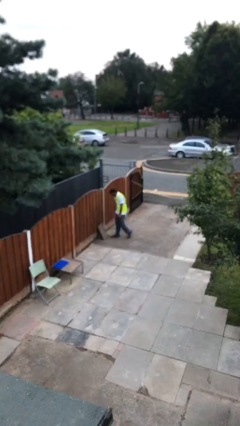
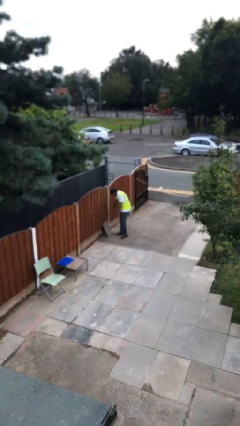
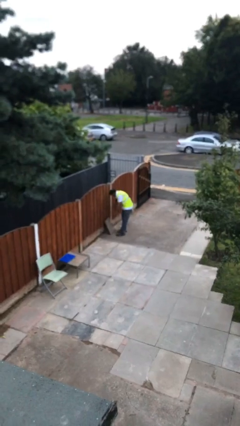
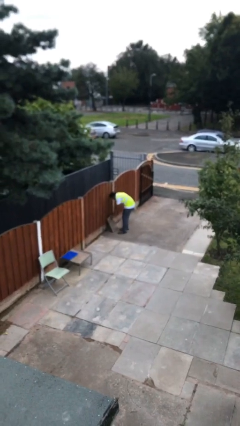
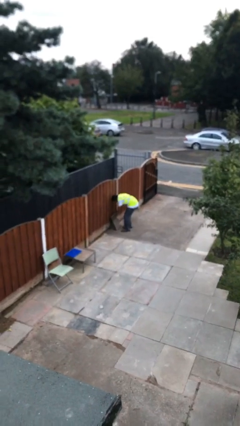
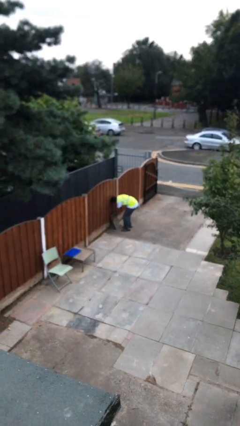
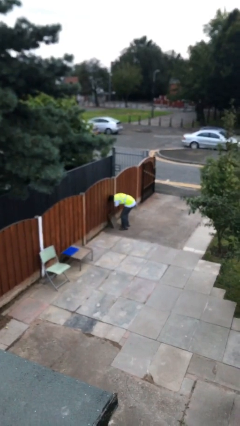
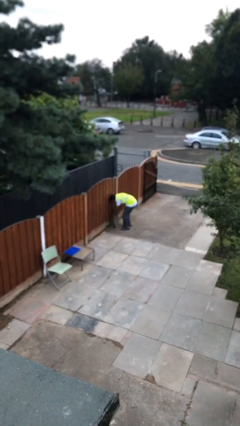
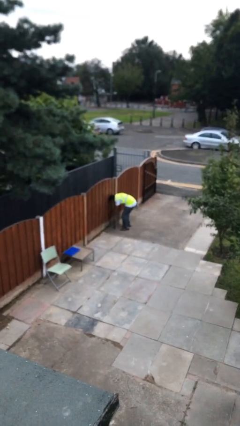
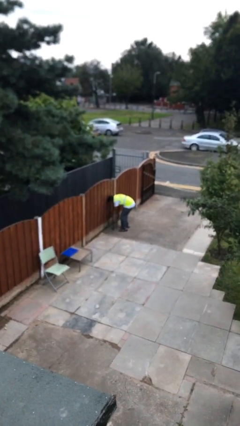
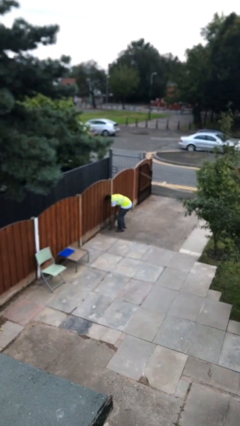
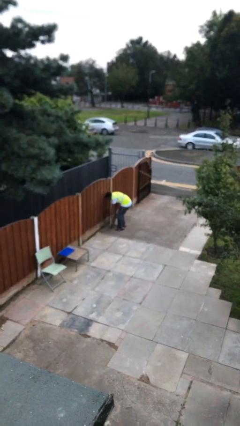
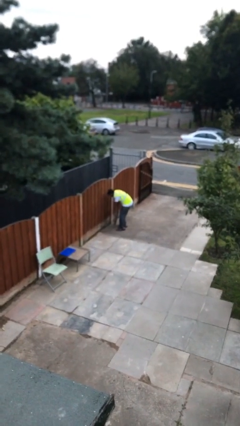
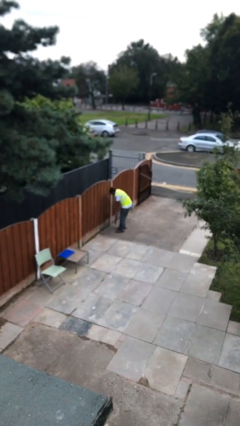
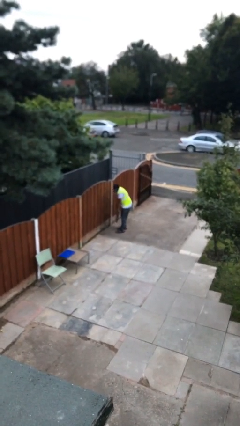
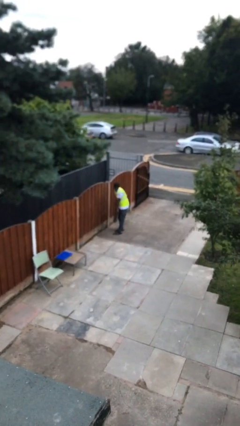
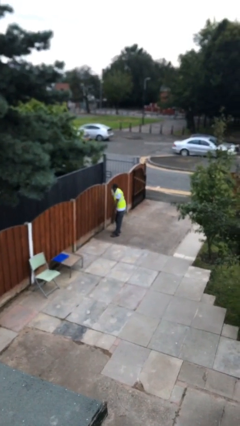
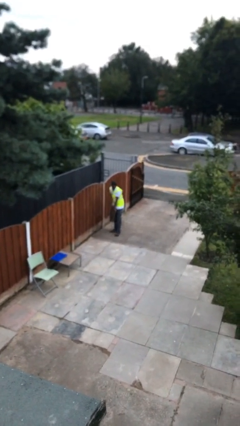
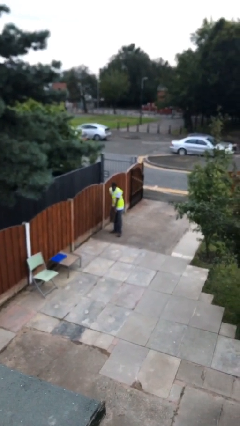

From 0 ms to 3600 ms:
person picks up object from floor

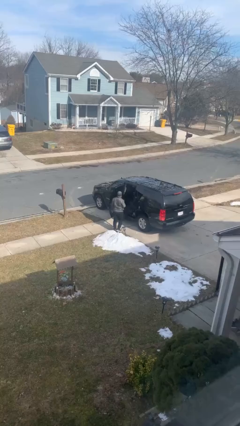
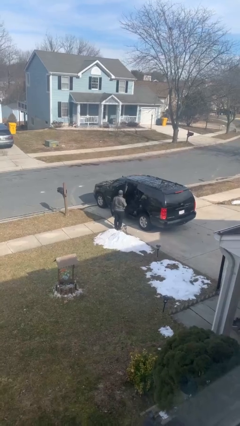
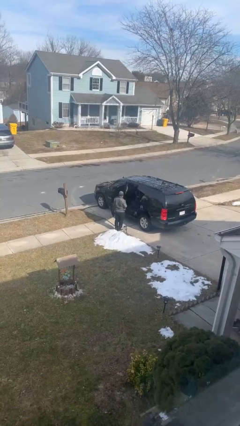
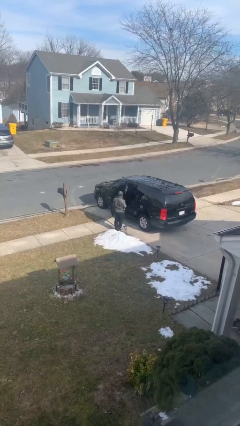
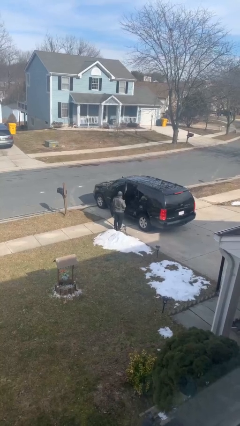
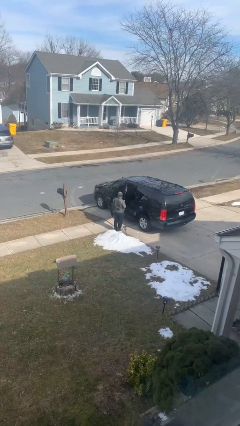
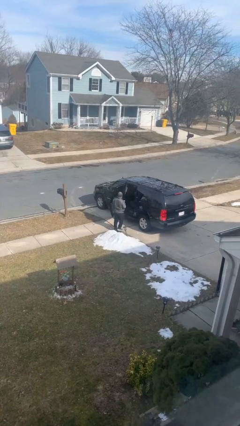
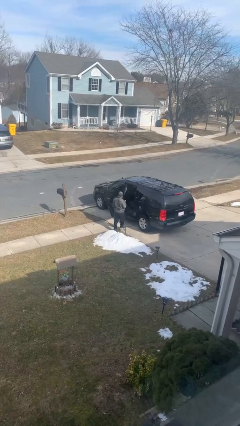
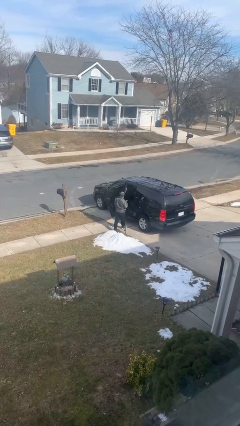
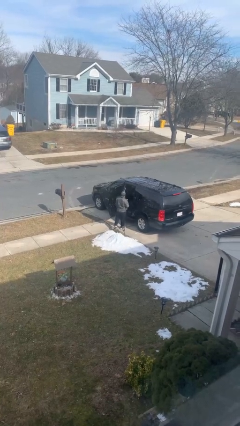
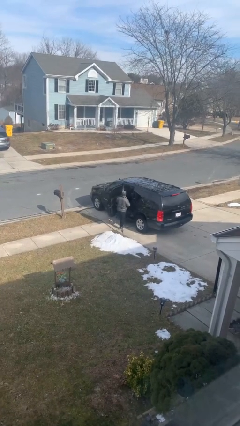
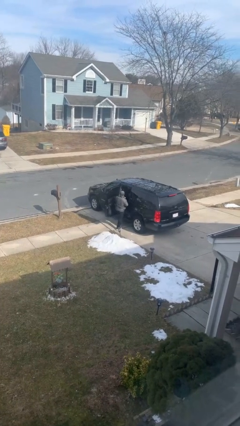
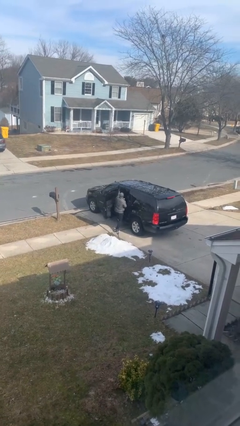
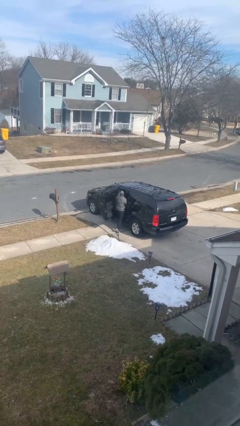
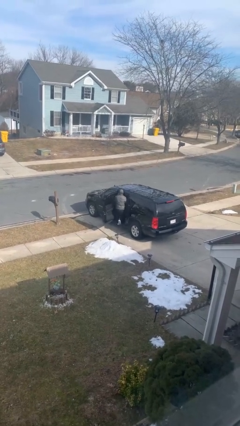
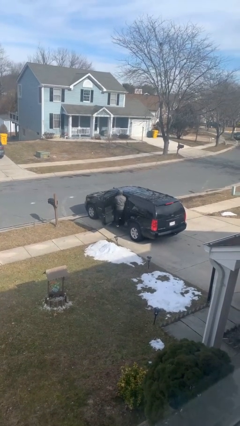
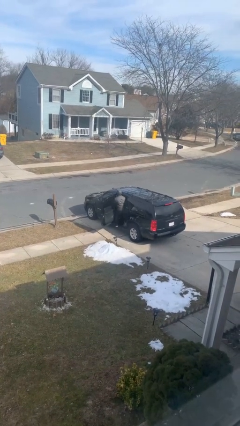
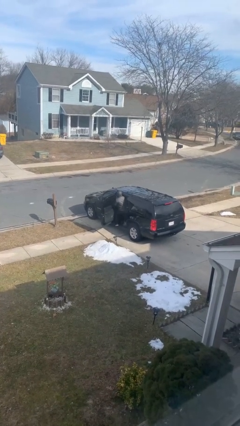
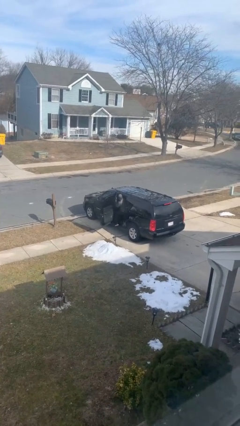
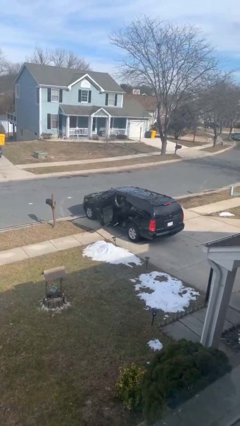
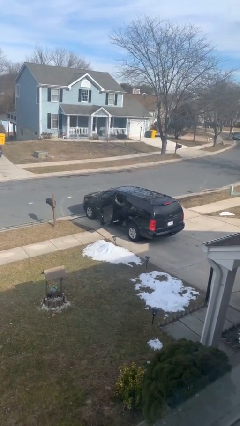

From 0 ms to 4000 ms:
person enters car

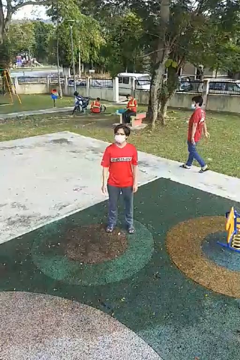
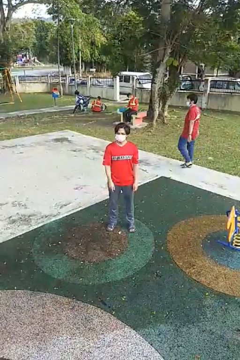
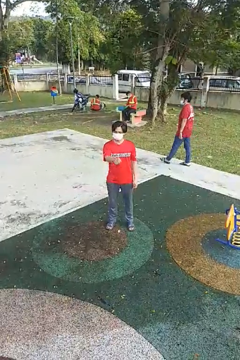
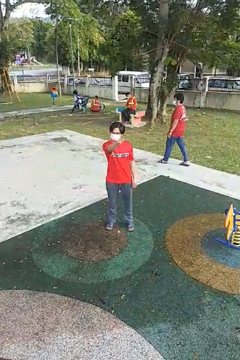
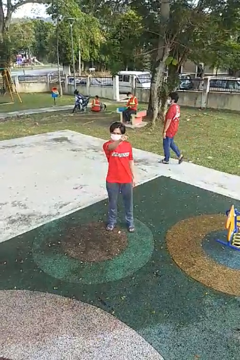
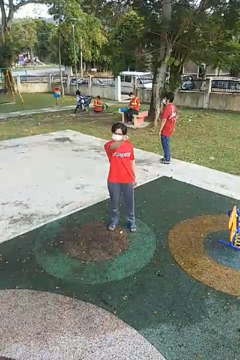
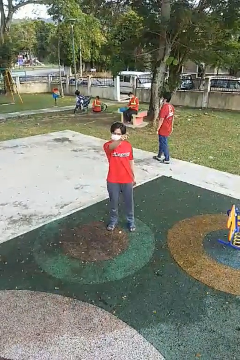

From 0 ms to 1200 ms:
person points at person

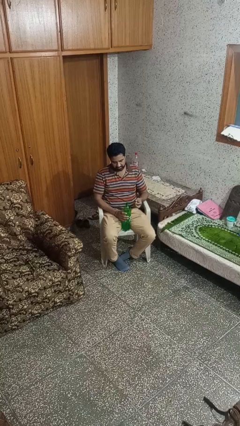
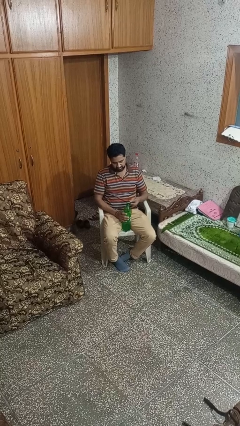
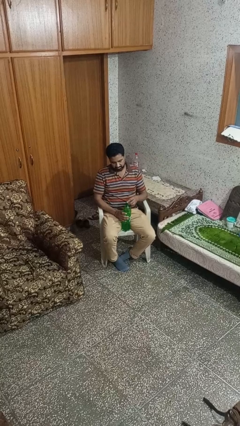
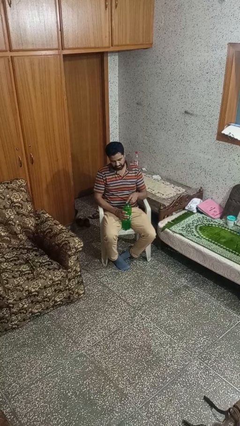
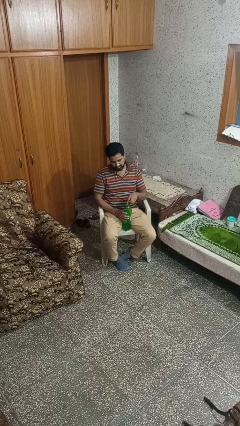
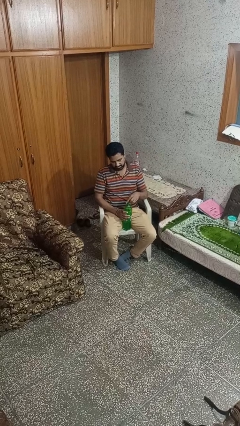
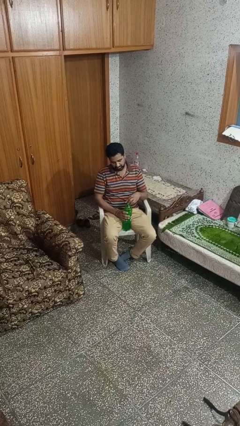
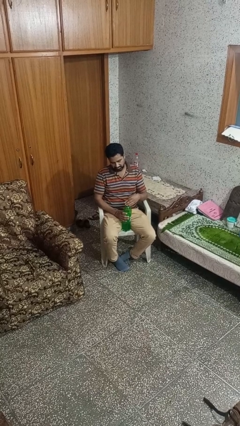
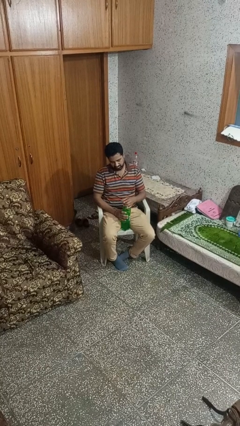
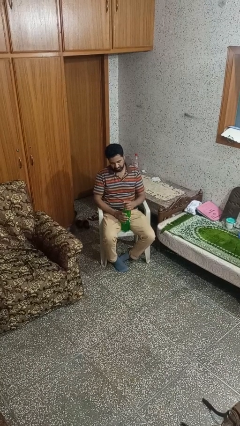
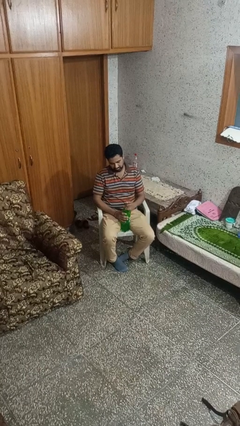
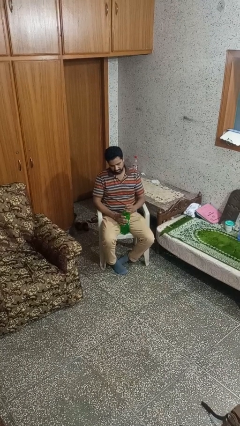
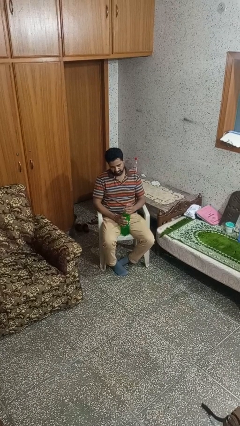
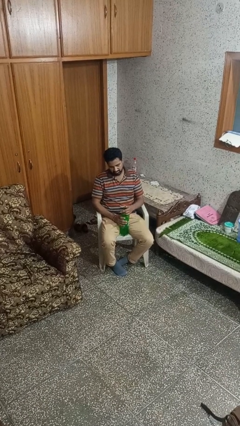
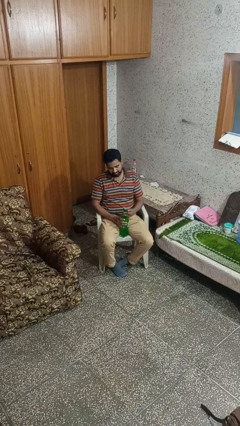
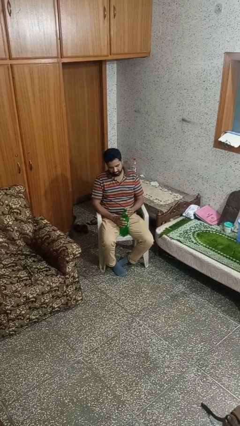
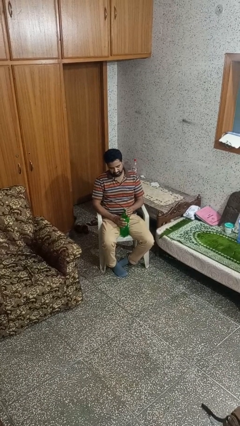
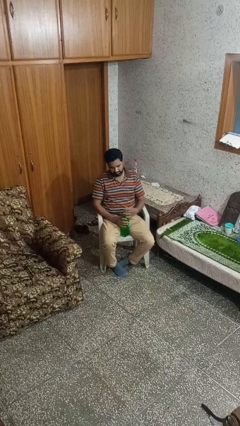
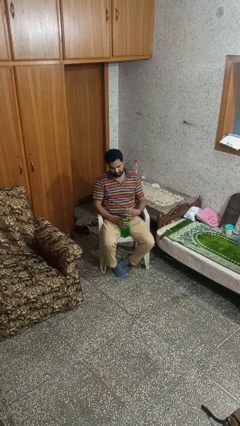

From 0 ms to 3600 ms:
person screws lid to bottle

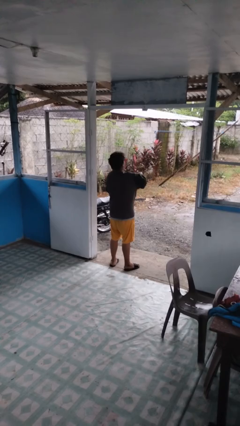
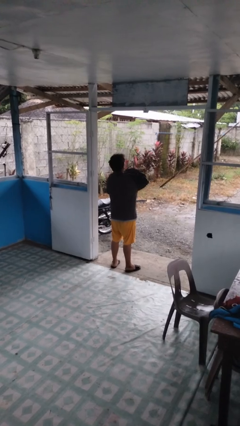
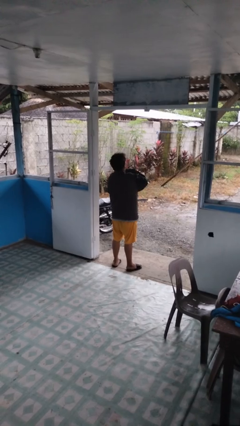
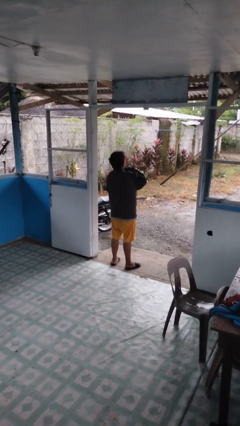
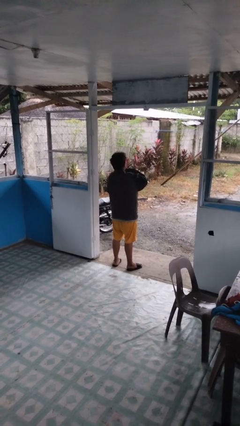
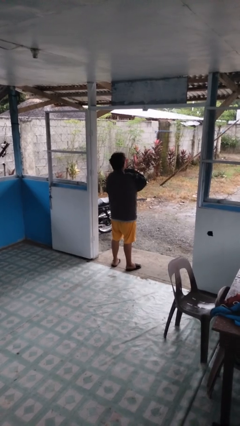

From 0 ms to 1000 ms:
person unzips jacket

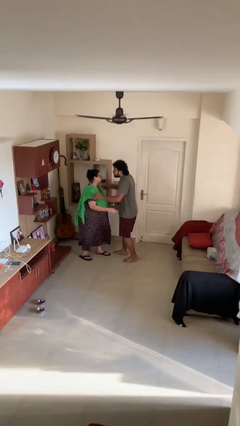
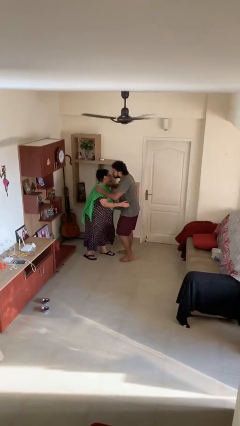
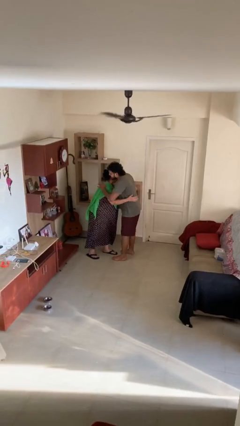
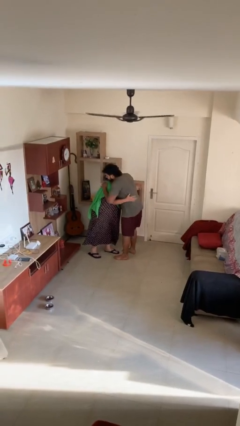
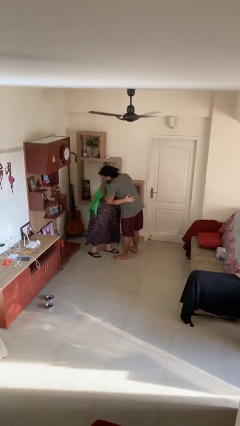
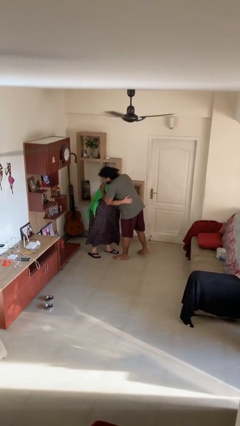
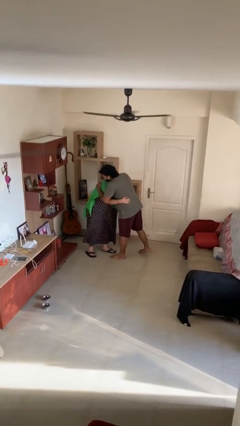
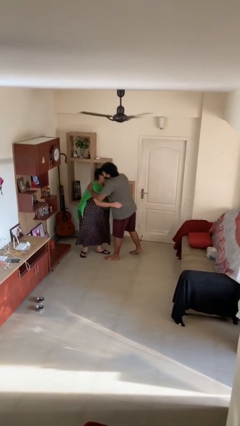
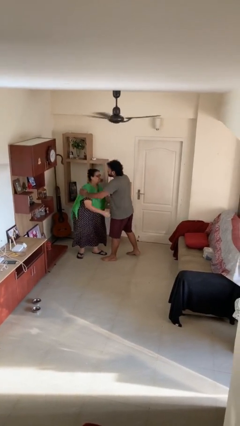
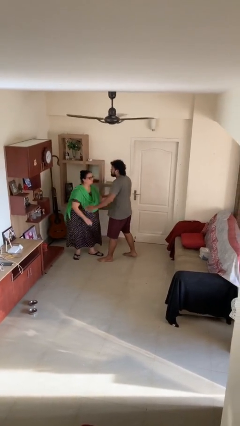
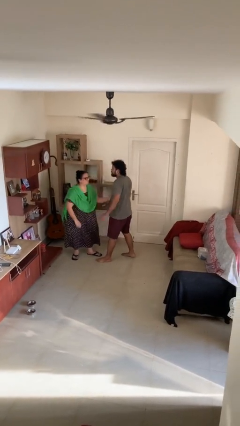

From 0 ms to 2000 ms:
person embraces person

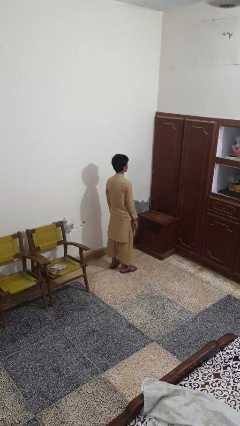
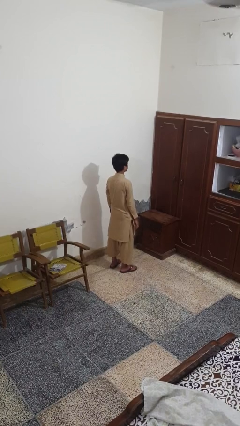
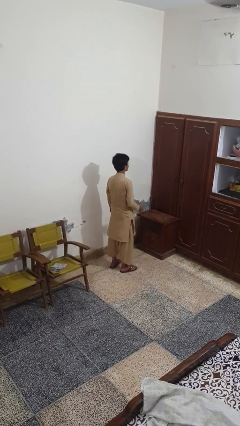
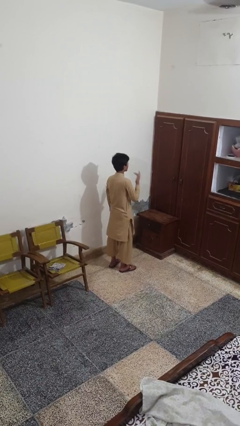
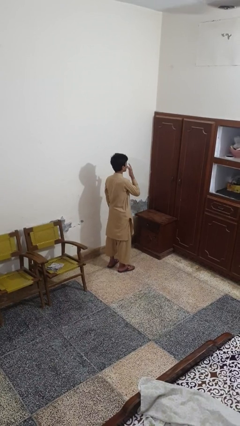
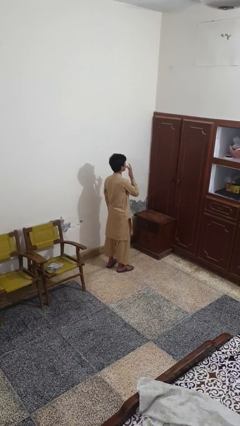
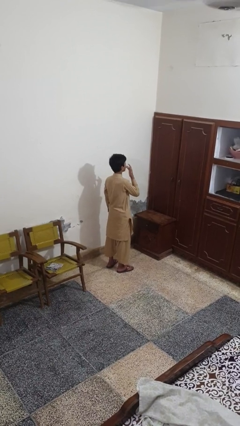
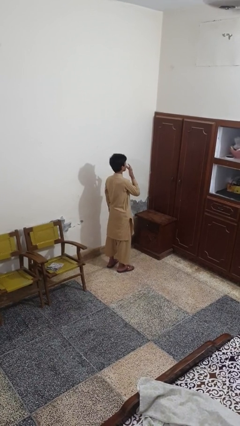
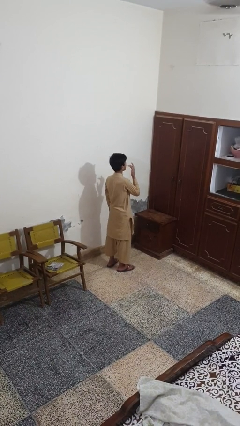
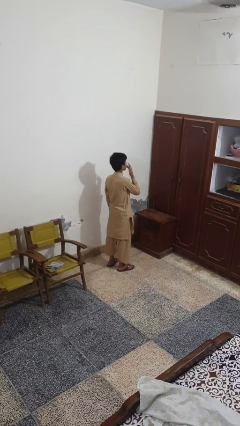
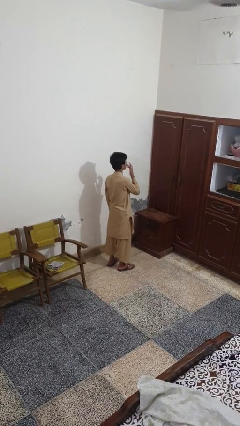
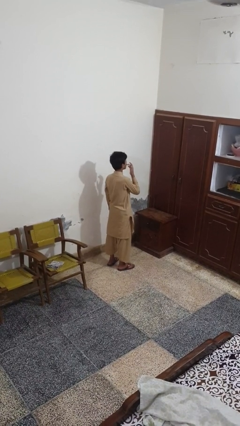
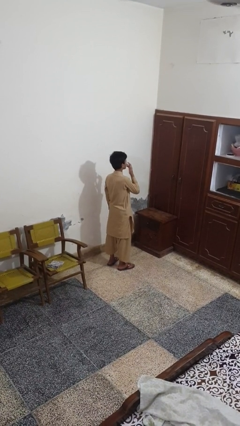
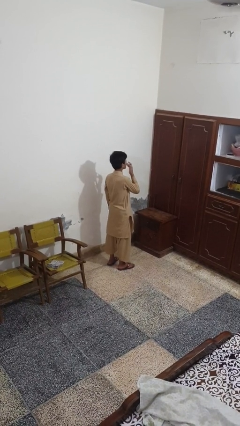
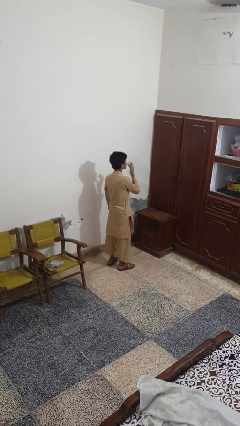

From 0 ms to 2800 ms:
person licks fingers
